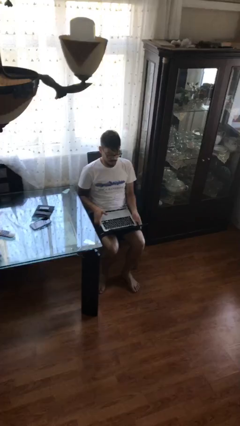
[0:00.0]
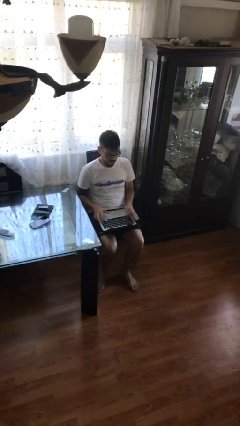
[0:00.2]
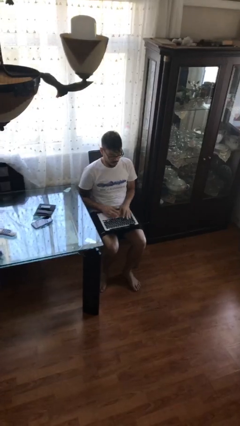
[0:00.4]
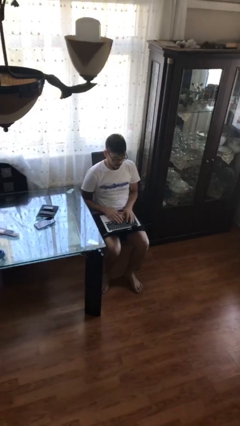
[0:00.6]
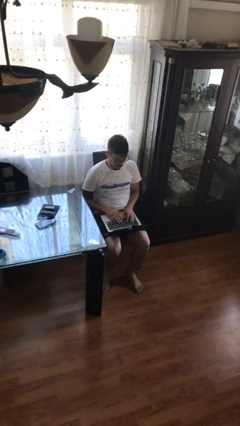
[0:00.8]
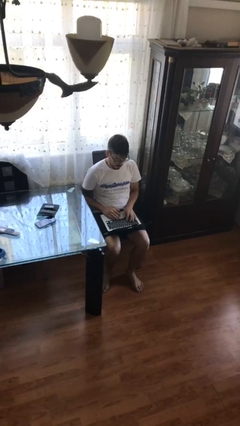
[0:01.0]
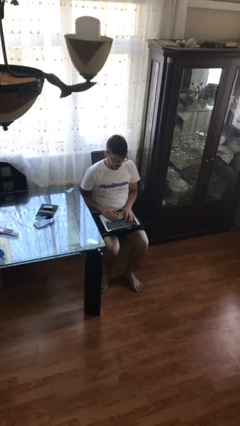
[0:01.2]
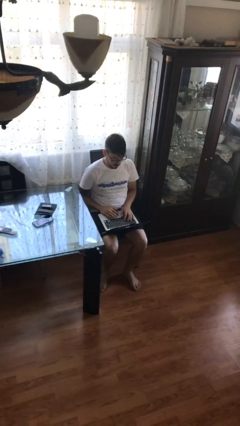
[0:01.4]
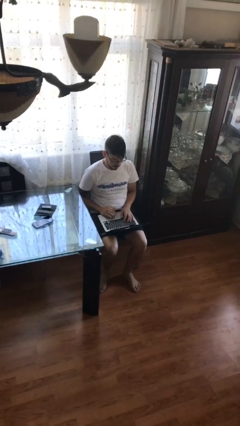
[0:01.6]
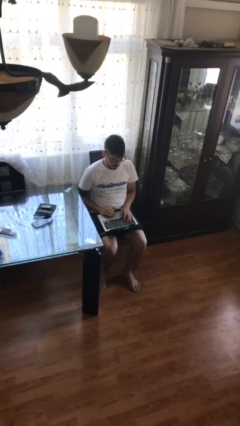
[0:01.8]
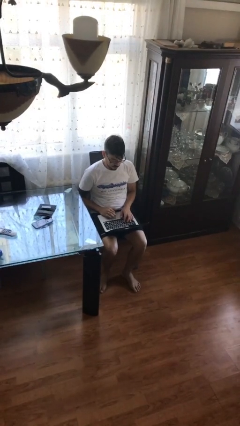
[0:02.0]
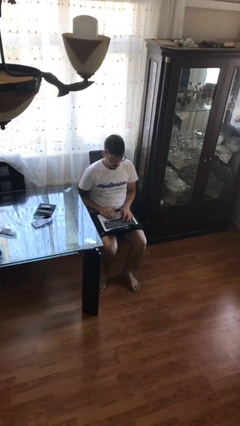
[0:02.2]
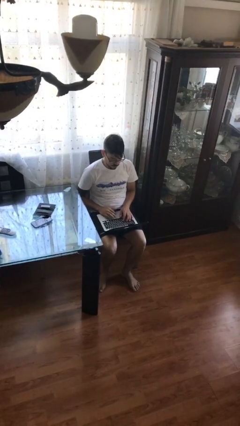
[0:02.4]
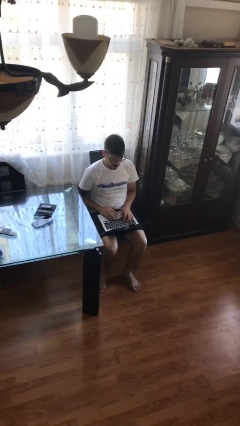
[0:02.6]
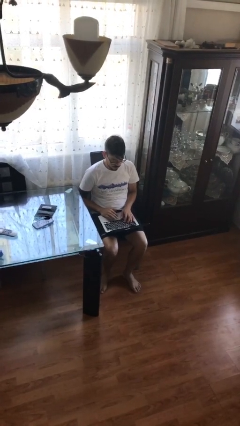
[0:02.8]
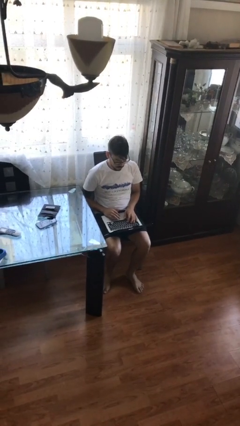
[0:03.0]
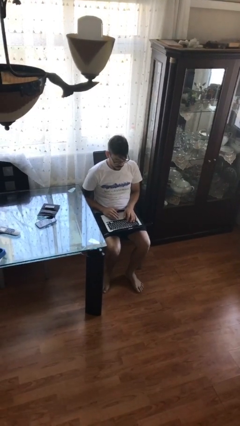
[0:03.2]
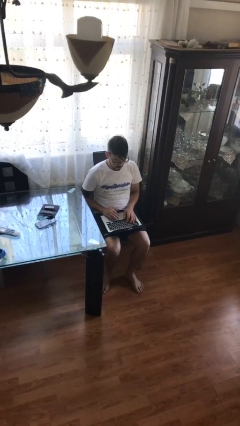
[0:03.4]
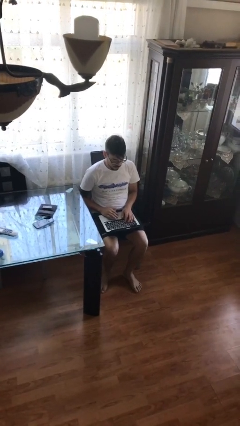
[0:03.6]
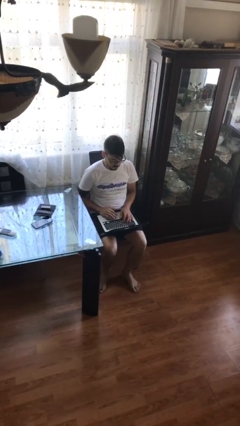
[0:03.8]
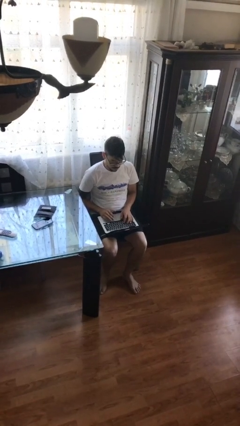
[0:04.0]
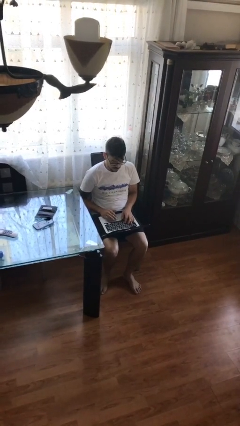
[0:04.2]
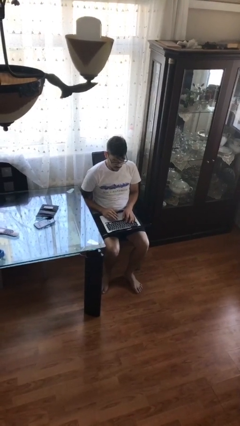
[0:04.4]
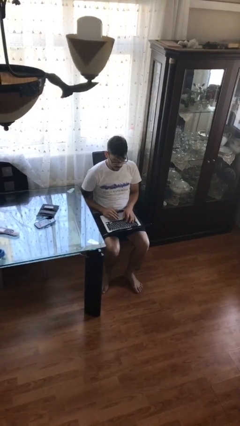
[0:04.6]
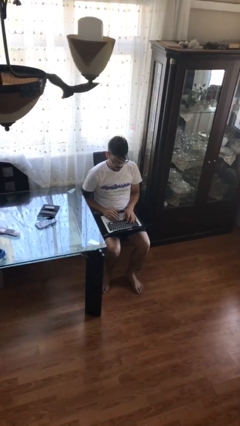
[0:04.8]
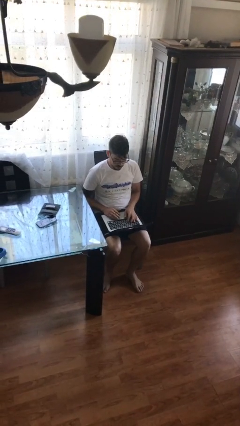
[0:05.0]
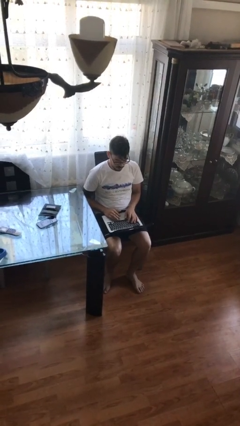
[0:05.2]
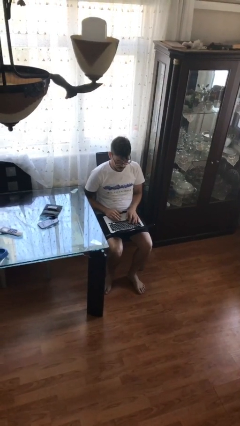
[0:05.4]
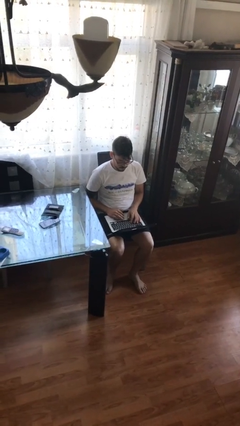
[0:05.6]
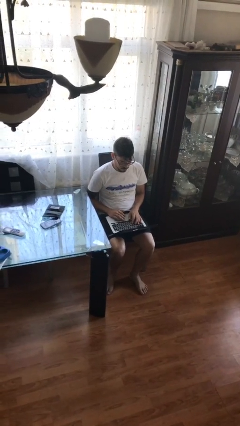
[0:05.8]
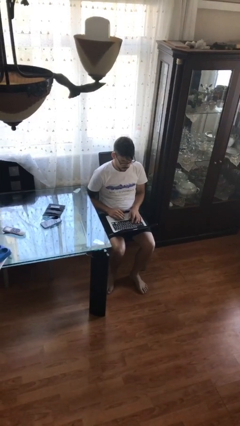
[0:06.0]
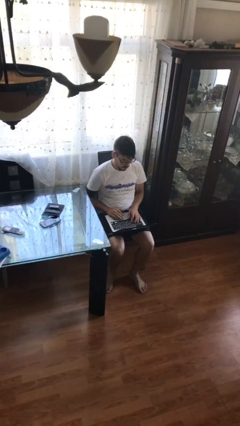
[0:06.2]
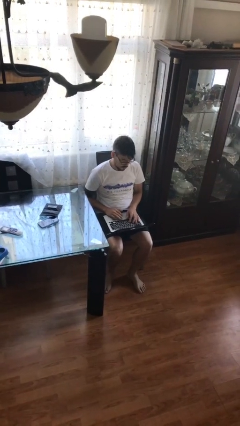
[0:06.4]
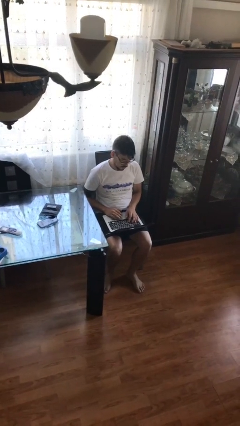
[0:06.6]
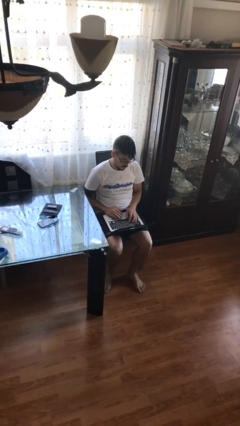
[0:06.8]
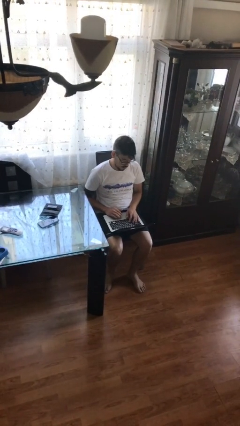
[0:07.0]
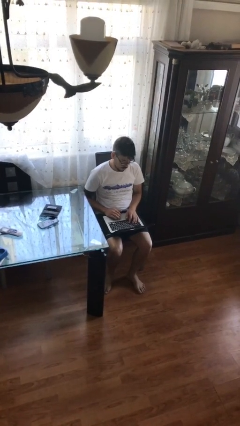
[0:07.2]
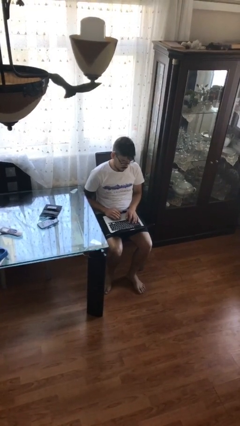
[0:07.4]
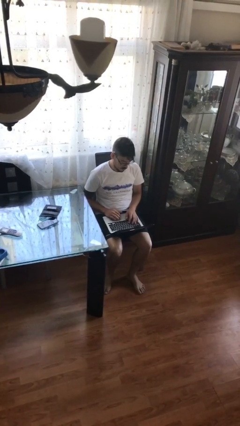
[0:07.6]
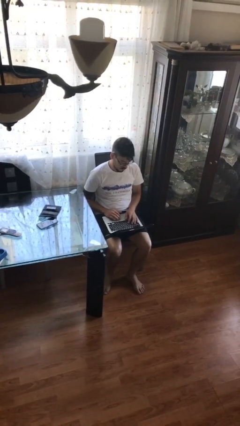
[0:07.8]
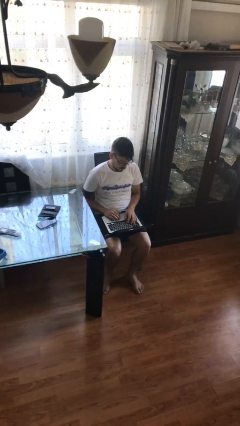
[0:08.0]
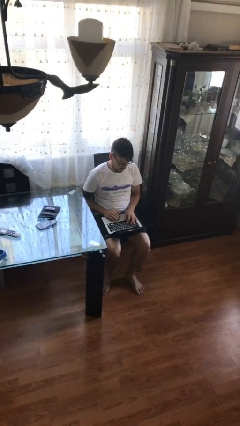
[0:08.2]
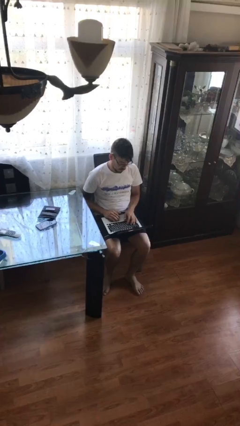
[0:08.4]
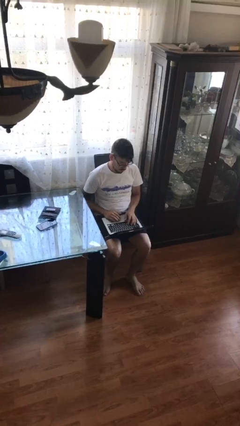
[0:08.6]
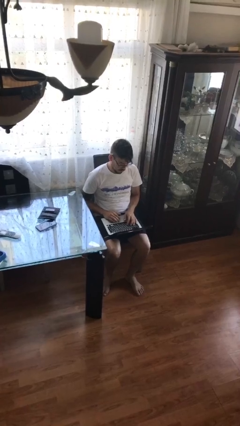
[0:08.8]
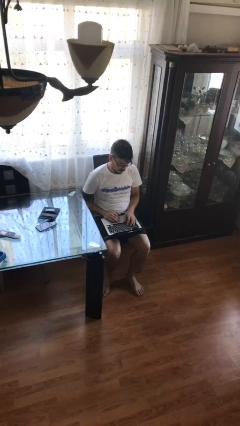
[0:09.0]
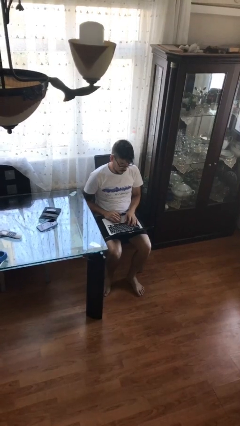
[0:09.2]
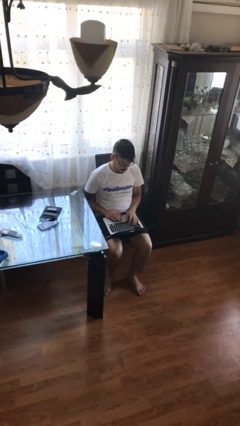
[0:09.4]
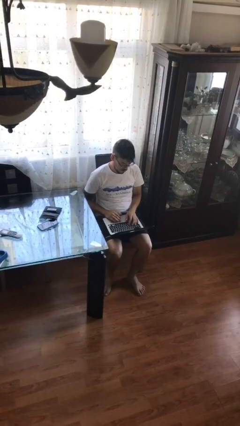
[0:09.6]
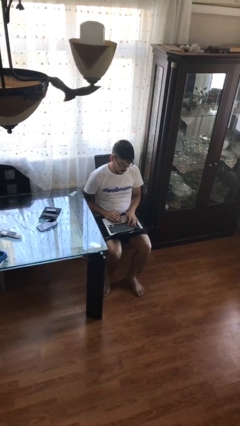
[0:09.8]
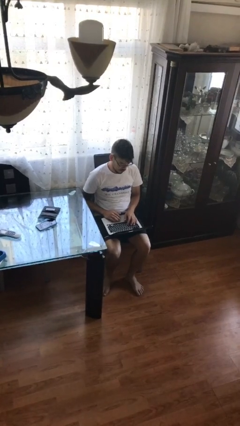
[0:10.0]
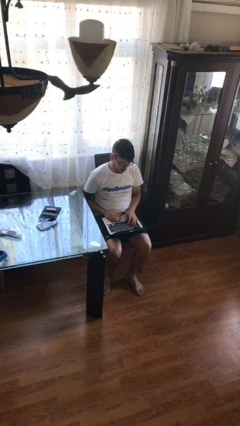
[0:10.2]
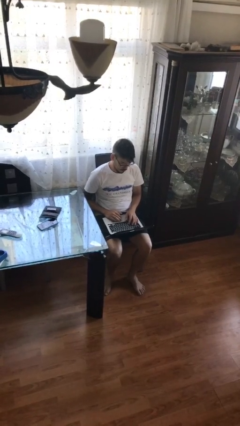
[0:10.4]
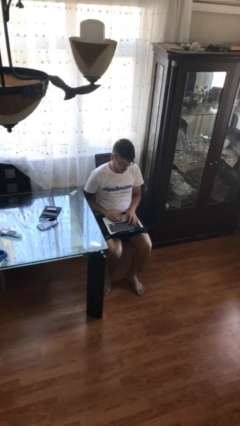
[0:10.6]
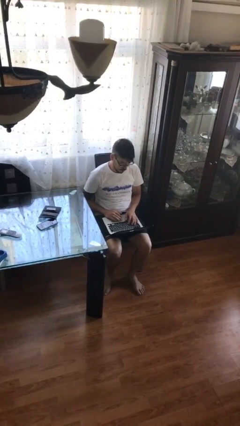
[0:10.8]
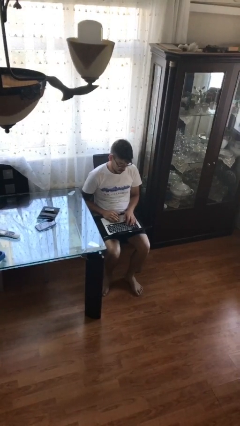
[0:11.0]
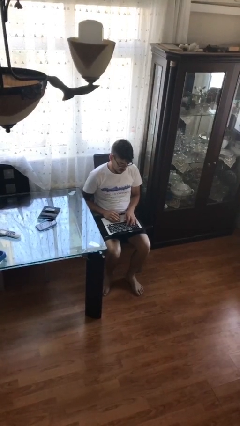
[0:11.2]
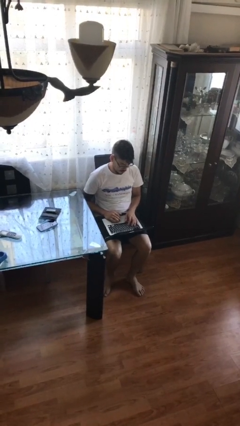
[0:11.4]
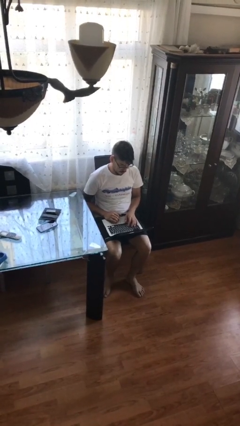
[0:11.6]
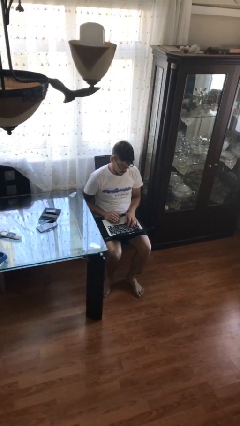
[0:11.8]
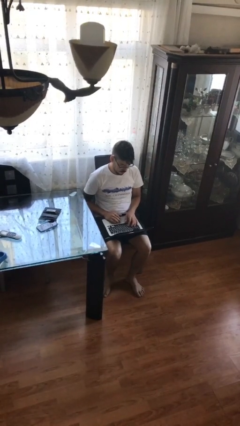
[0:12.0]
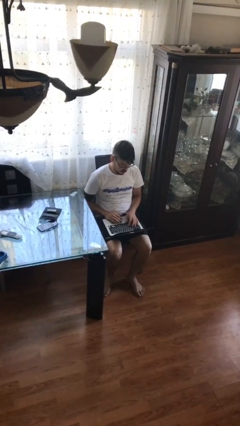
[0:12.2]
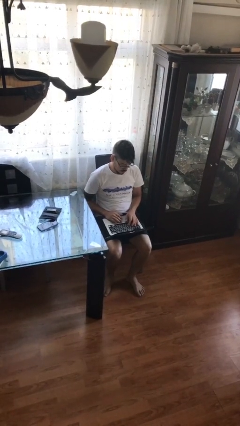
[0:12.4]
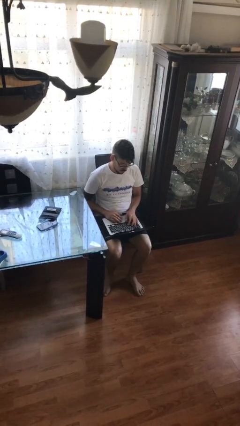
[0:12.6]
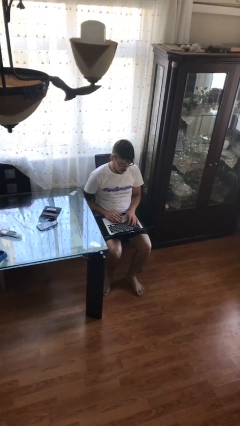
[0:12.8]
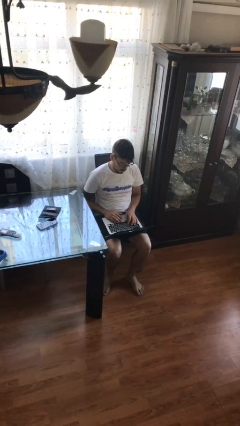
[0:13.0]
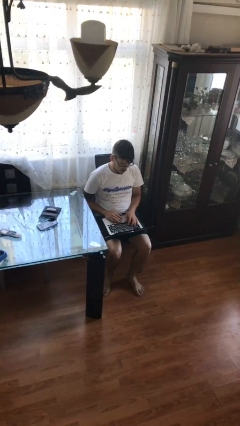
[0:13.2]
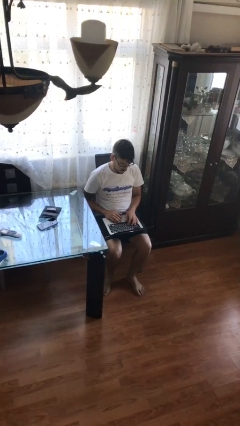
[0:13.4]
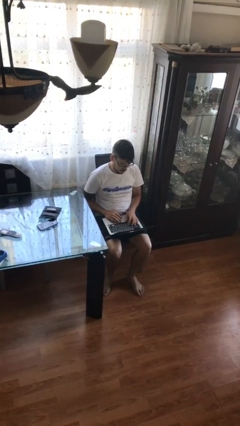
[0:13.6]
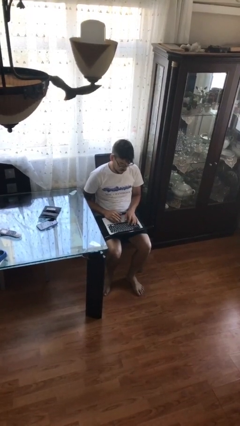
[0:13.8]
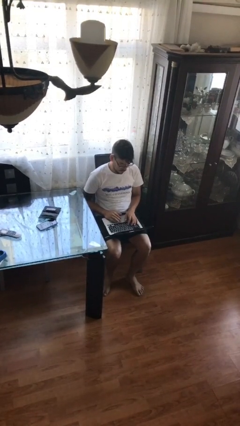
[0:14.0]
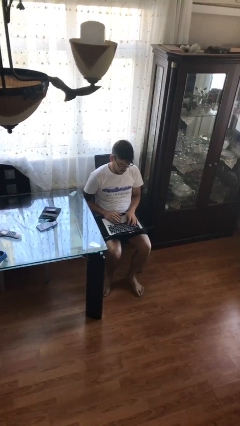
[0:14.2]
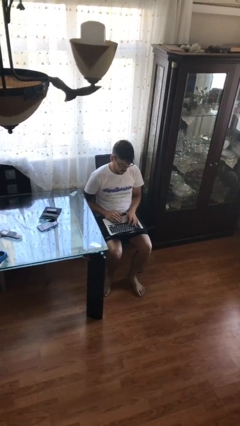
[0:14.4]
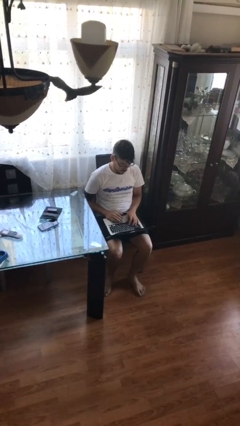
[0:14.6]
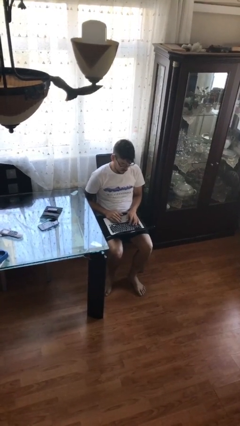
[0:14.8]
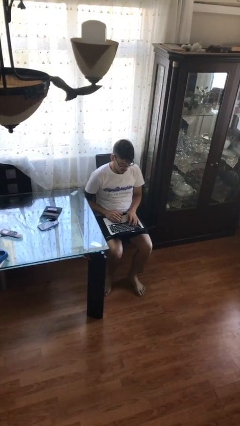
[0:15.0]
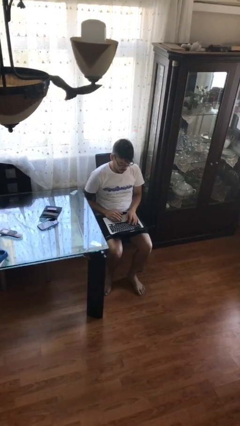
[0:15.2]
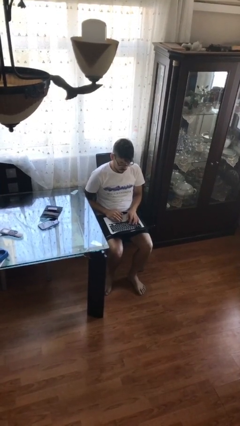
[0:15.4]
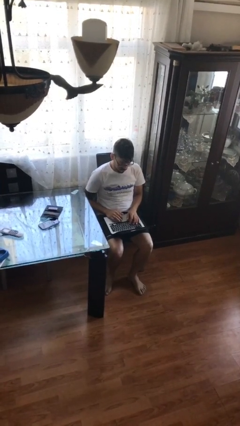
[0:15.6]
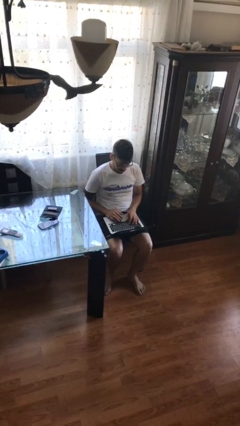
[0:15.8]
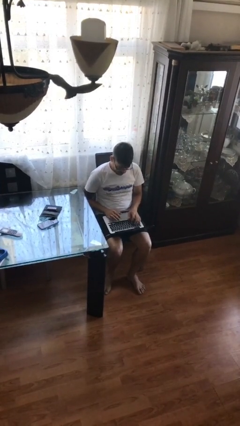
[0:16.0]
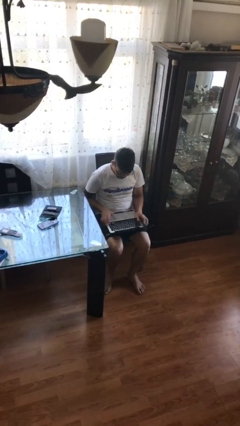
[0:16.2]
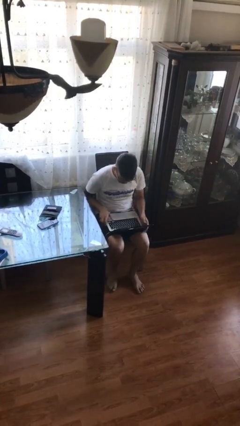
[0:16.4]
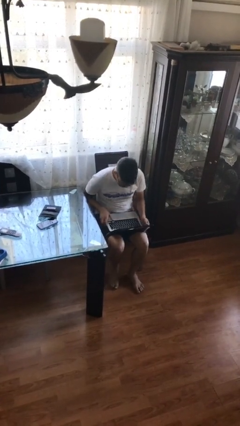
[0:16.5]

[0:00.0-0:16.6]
person interacts with laptop

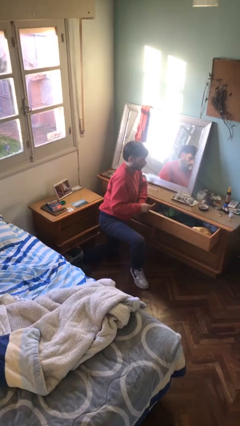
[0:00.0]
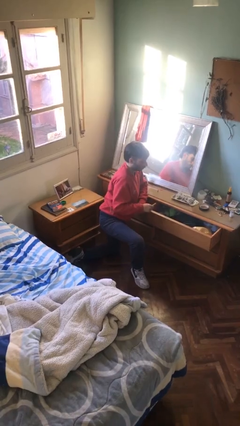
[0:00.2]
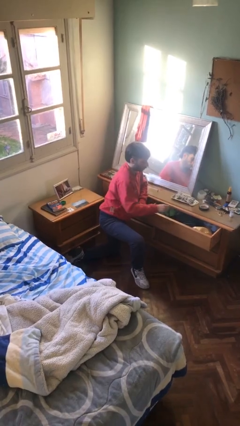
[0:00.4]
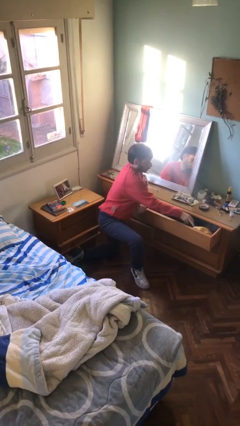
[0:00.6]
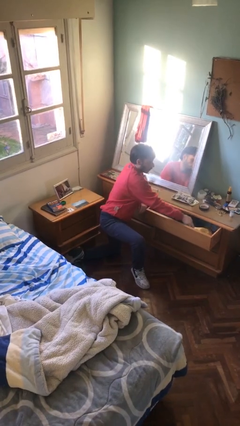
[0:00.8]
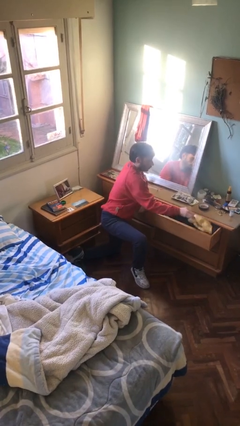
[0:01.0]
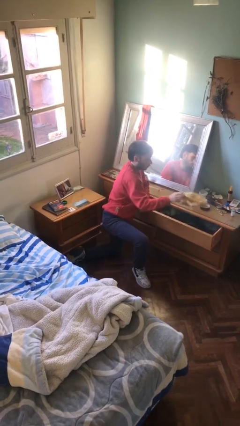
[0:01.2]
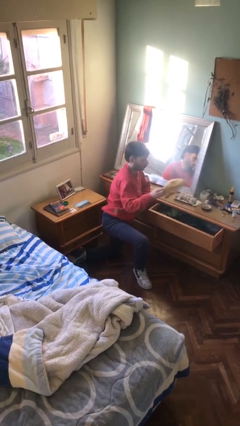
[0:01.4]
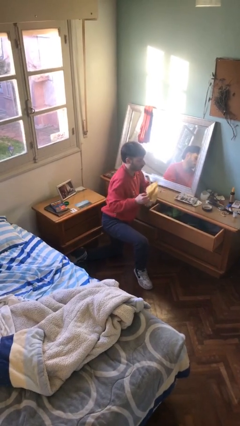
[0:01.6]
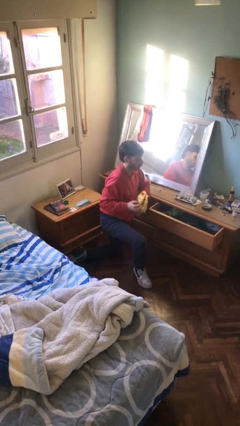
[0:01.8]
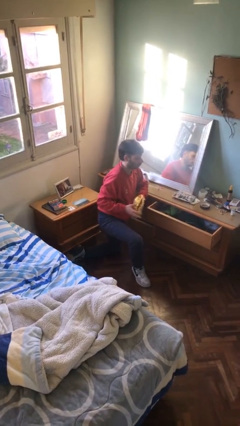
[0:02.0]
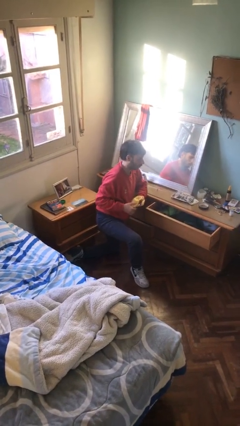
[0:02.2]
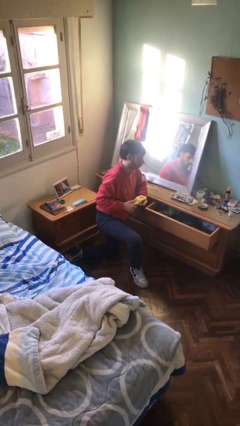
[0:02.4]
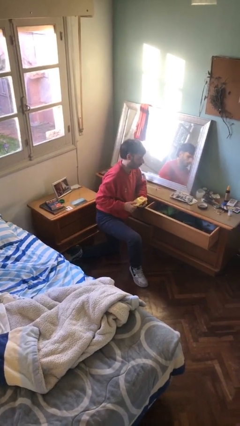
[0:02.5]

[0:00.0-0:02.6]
person takes clothes from dresser
